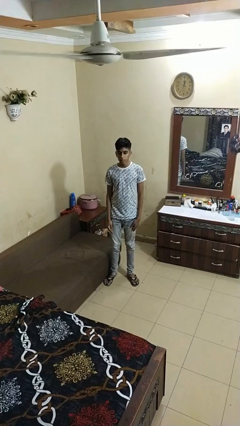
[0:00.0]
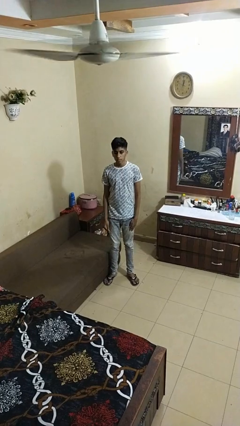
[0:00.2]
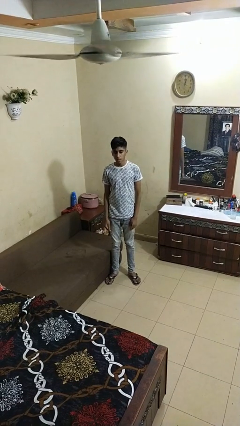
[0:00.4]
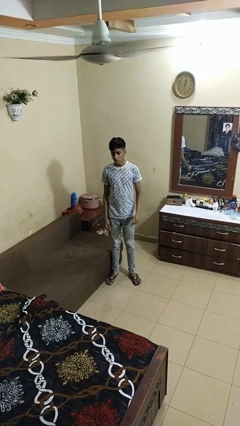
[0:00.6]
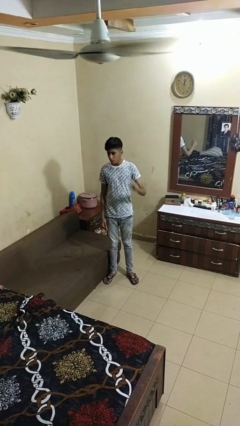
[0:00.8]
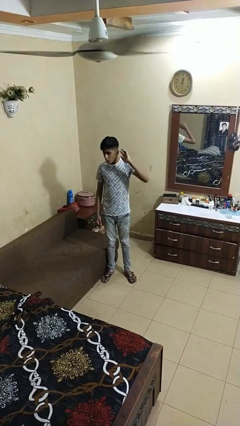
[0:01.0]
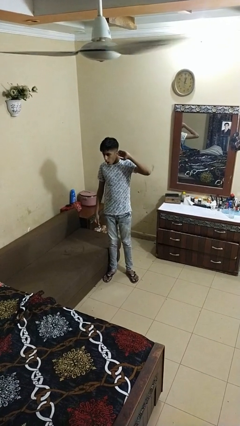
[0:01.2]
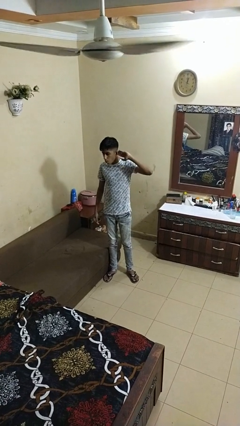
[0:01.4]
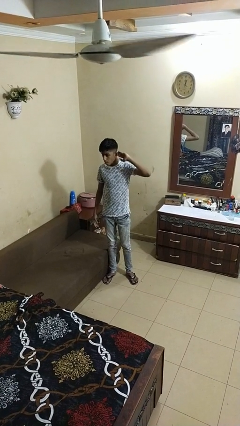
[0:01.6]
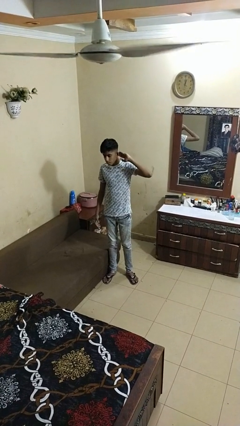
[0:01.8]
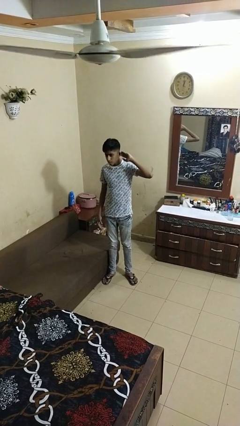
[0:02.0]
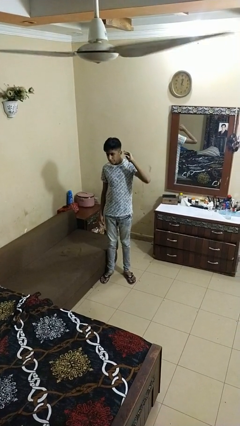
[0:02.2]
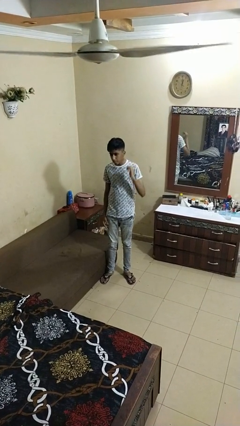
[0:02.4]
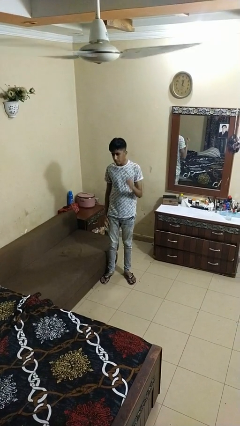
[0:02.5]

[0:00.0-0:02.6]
person gestures listen closely

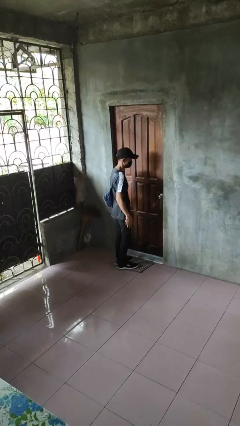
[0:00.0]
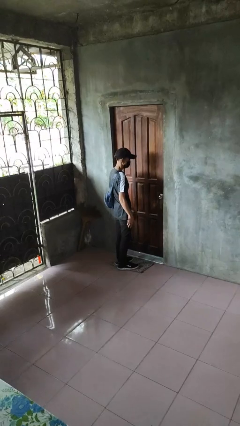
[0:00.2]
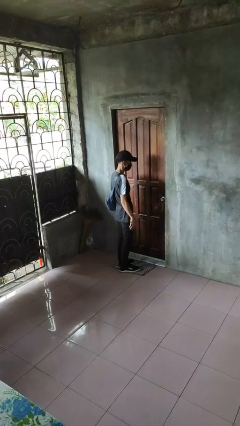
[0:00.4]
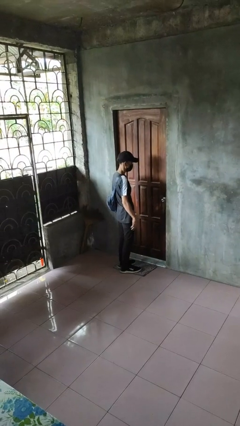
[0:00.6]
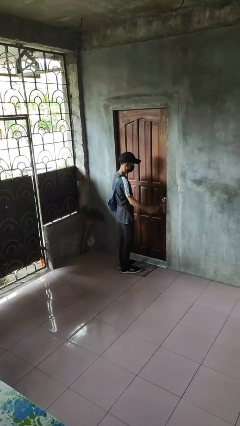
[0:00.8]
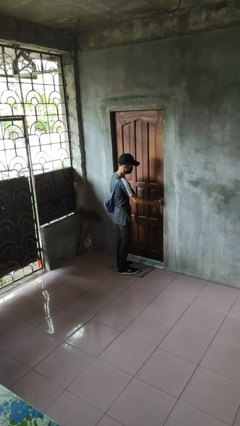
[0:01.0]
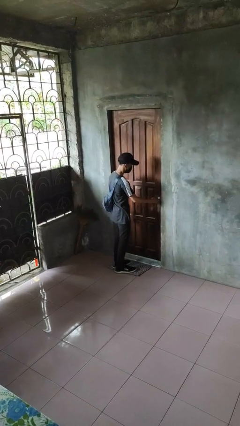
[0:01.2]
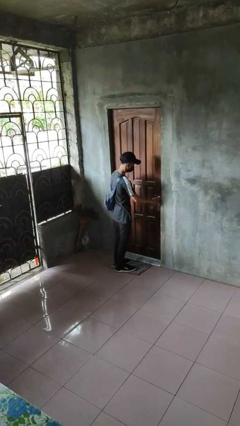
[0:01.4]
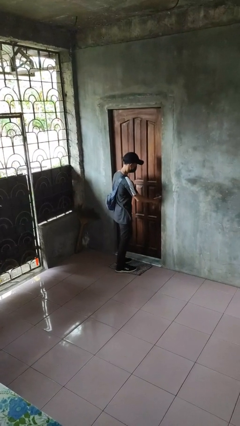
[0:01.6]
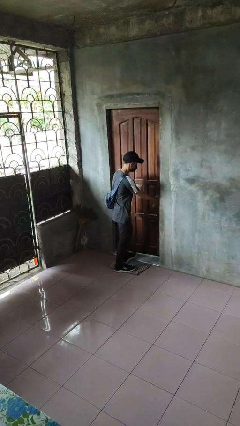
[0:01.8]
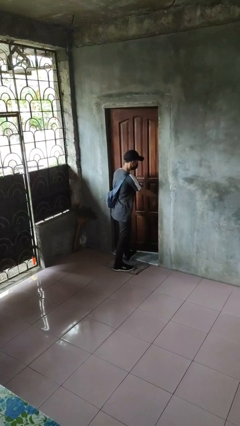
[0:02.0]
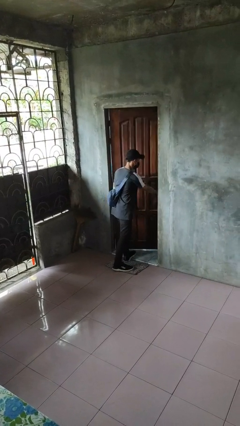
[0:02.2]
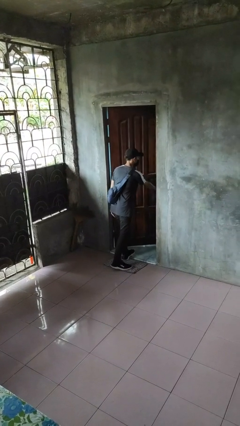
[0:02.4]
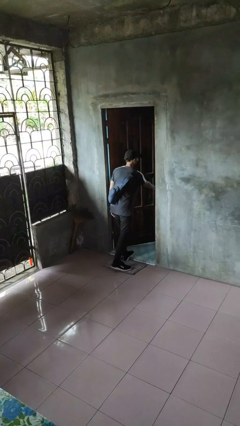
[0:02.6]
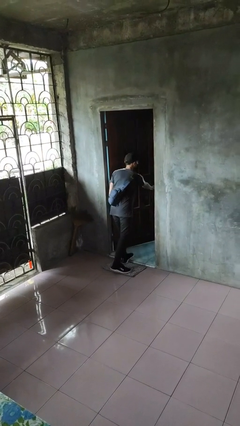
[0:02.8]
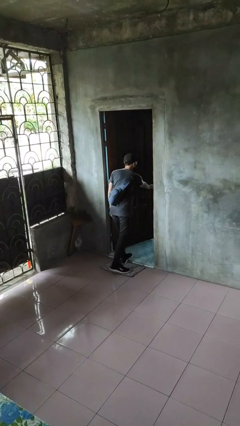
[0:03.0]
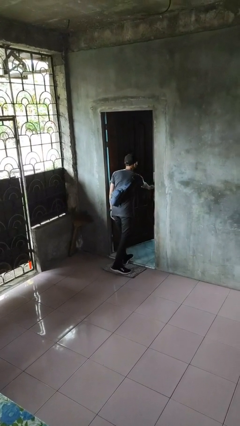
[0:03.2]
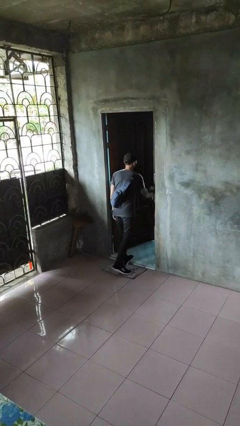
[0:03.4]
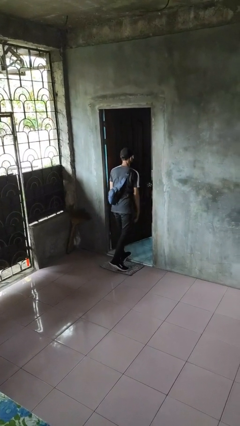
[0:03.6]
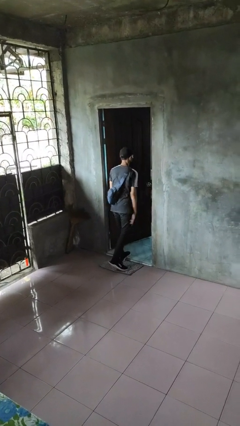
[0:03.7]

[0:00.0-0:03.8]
person opens facility door

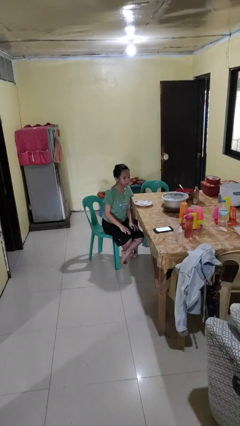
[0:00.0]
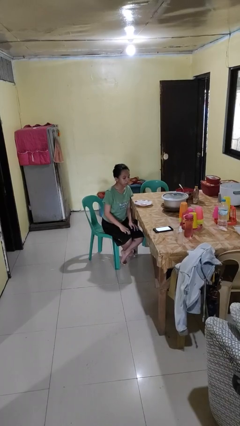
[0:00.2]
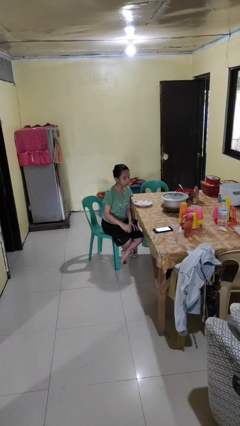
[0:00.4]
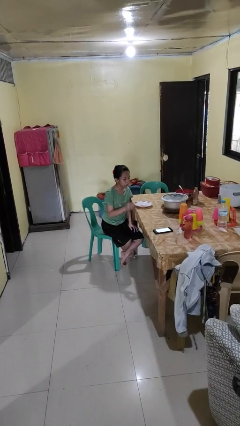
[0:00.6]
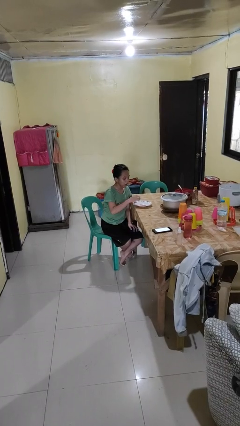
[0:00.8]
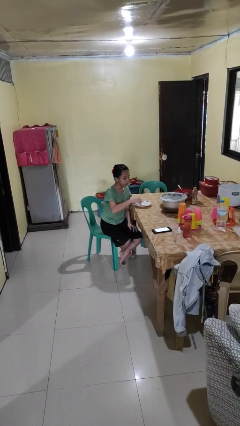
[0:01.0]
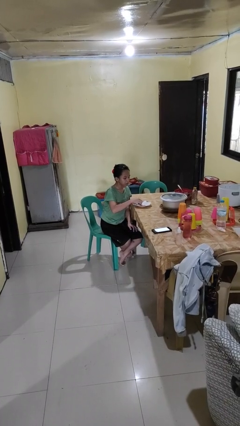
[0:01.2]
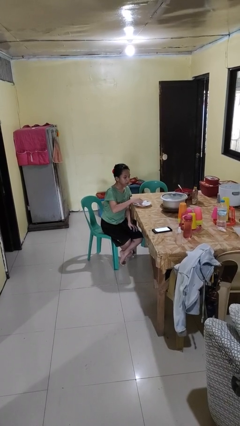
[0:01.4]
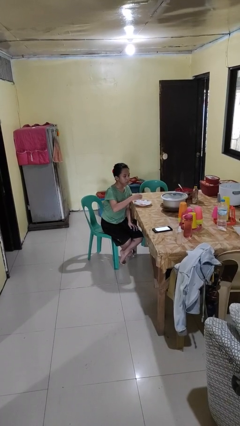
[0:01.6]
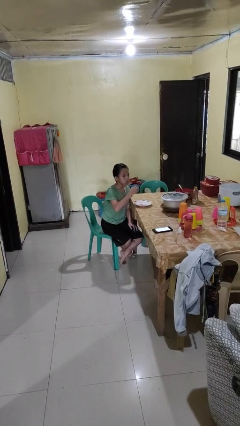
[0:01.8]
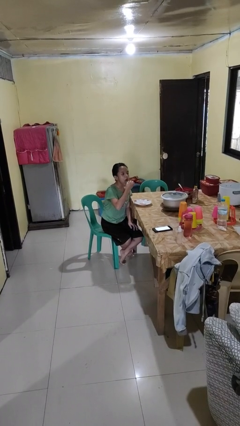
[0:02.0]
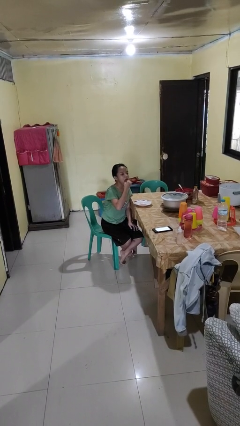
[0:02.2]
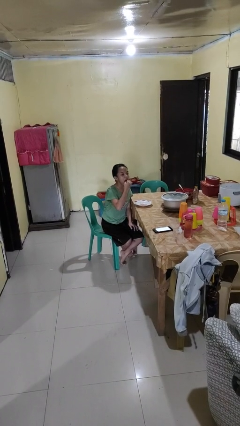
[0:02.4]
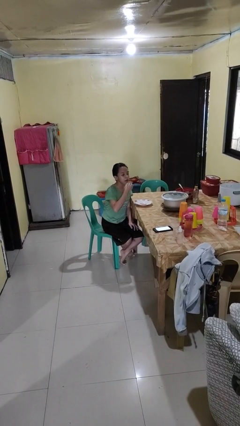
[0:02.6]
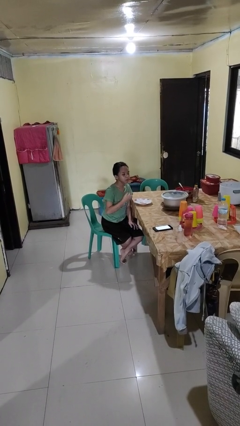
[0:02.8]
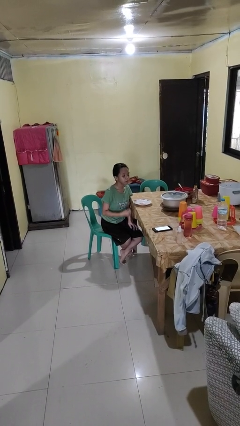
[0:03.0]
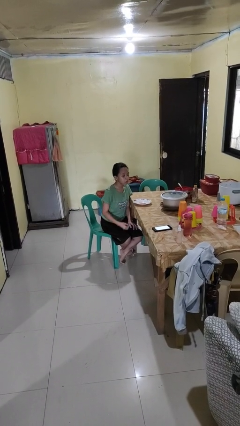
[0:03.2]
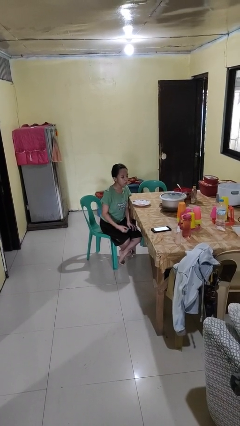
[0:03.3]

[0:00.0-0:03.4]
person eats with hands

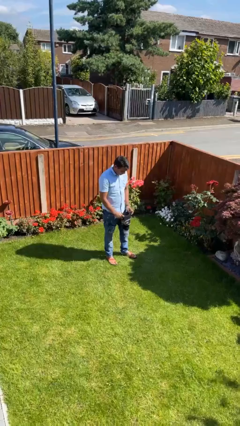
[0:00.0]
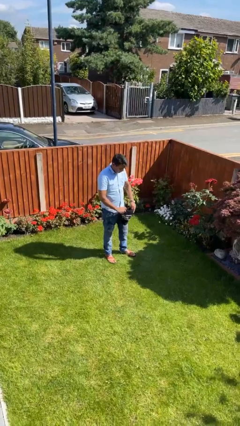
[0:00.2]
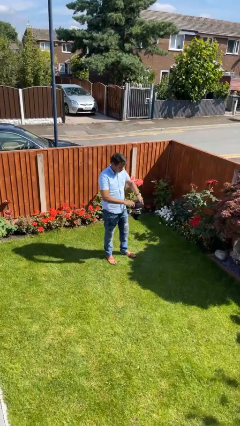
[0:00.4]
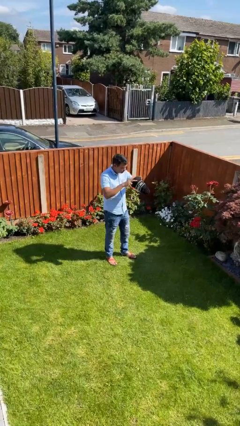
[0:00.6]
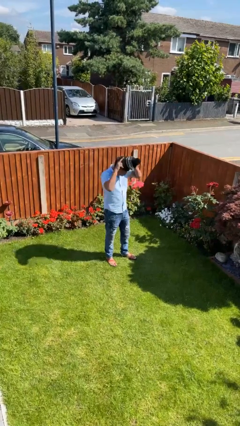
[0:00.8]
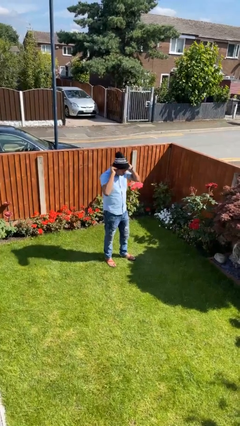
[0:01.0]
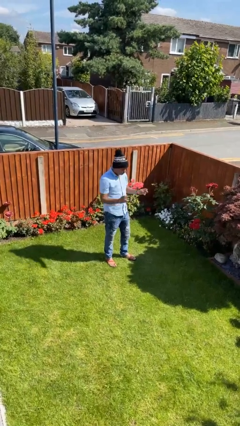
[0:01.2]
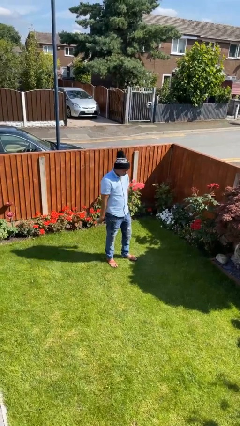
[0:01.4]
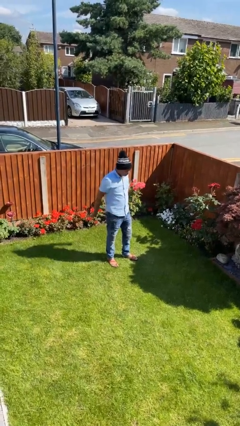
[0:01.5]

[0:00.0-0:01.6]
person puts on hat

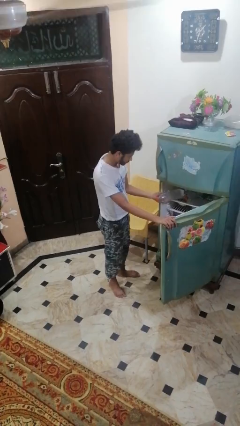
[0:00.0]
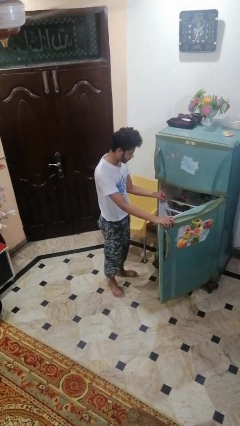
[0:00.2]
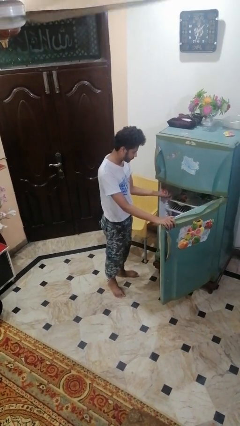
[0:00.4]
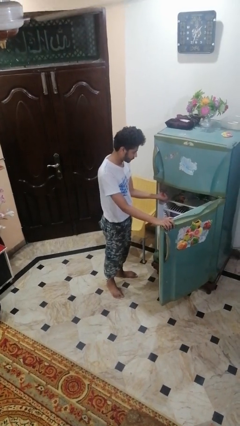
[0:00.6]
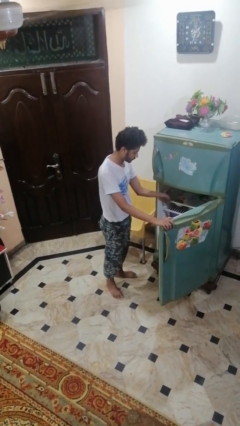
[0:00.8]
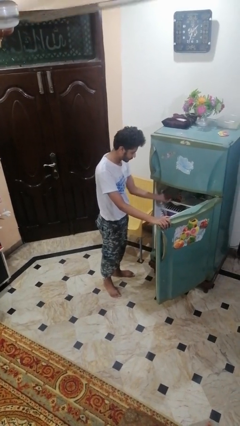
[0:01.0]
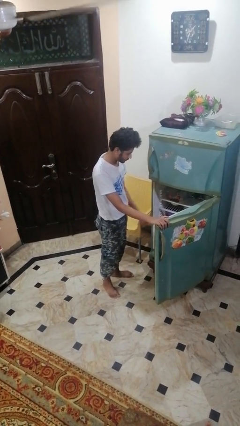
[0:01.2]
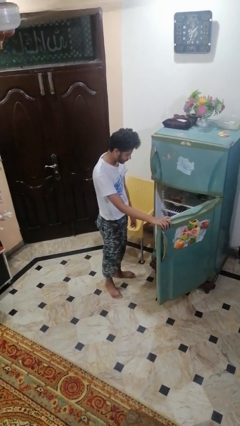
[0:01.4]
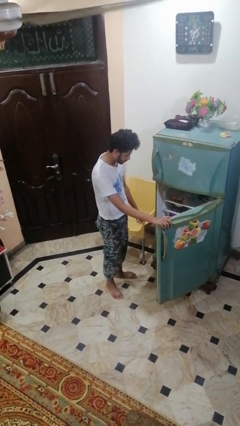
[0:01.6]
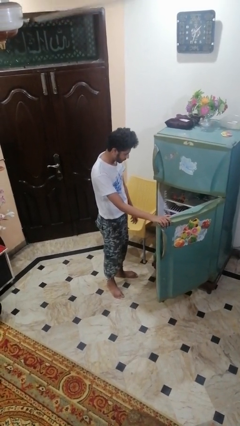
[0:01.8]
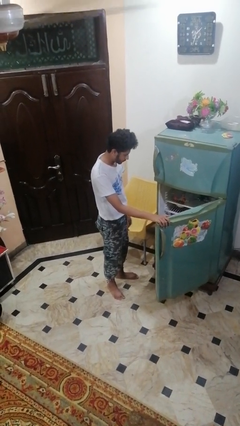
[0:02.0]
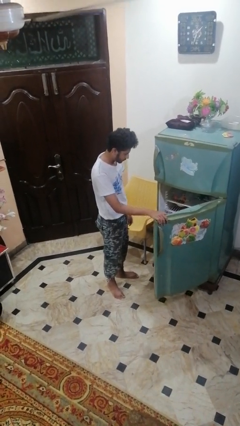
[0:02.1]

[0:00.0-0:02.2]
person puts object into refrigerator

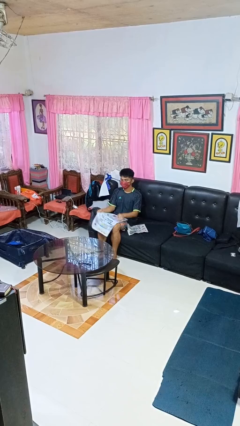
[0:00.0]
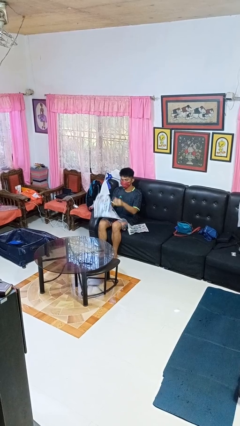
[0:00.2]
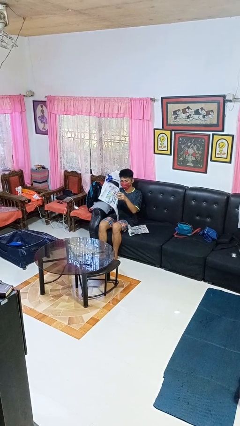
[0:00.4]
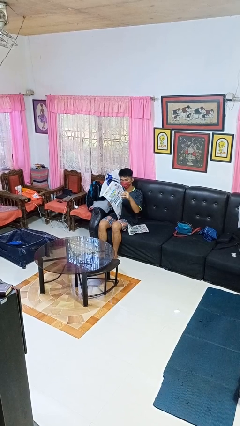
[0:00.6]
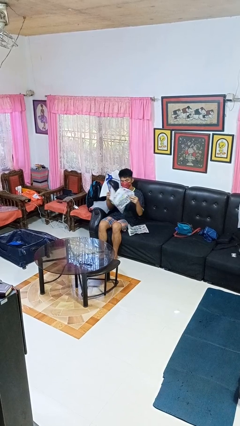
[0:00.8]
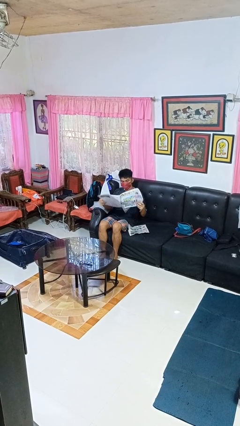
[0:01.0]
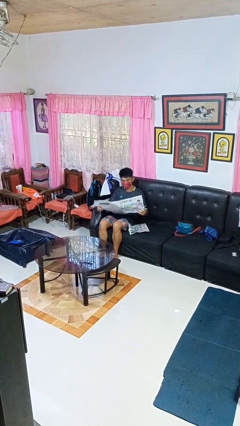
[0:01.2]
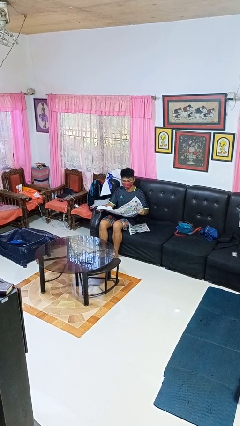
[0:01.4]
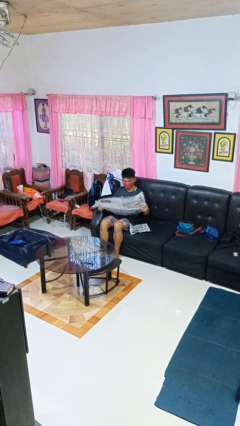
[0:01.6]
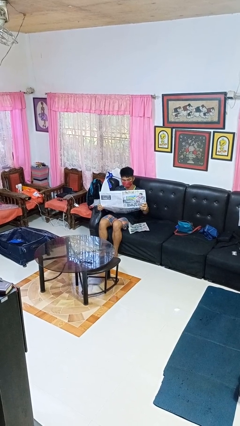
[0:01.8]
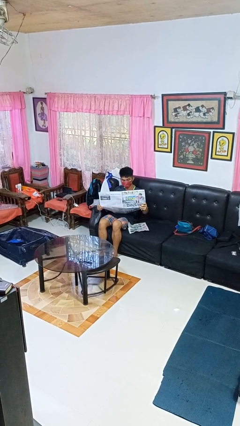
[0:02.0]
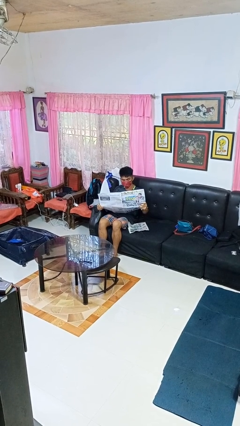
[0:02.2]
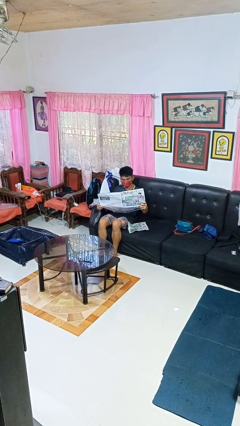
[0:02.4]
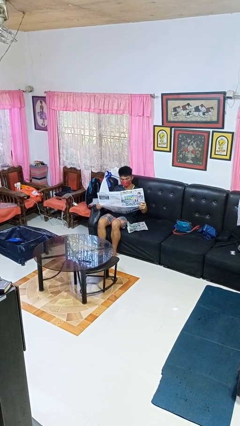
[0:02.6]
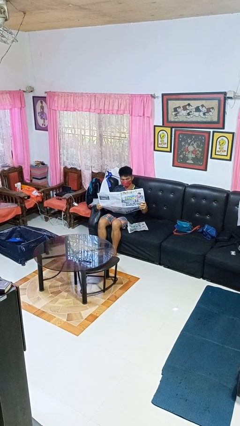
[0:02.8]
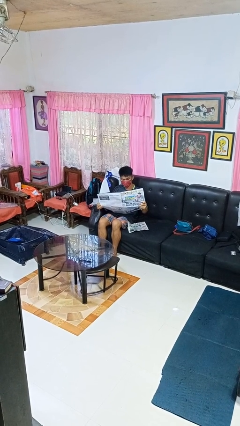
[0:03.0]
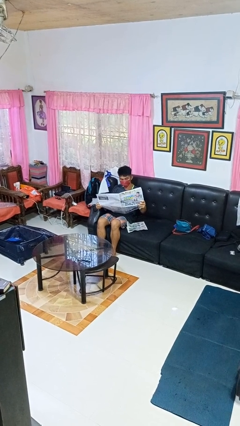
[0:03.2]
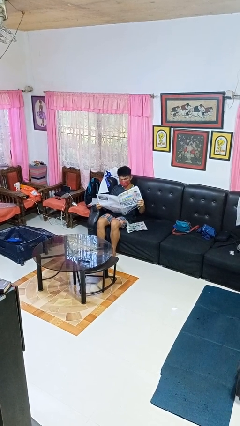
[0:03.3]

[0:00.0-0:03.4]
person reads newspaper

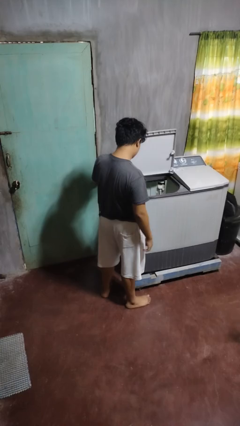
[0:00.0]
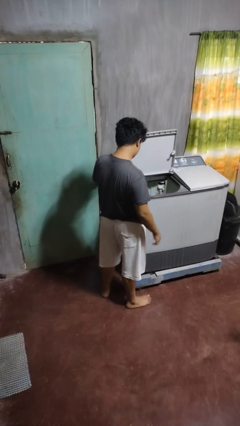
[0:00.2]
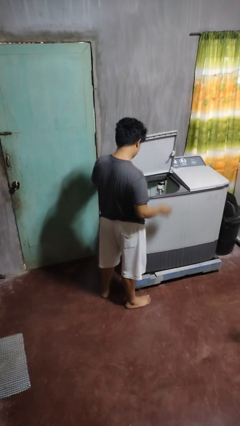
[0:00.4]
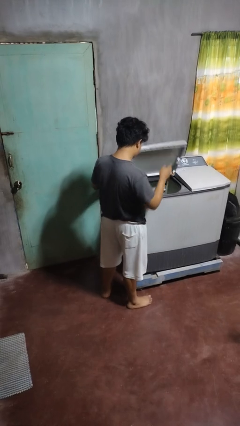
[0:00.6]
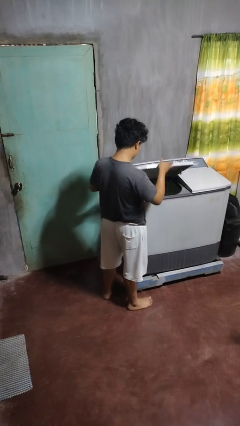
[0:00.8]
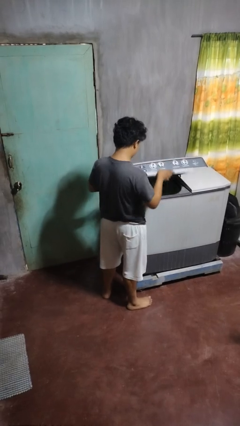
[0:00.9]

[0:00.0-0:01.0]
person closes clothes washer
